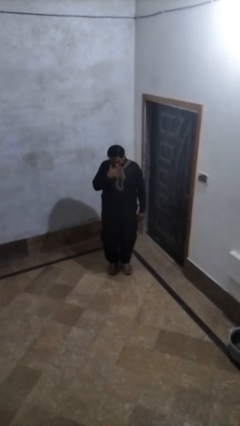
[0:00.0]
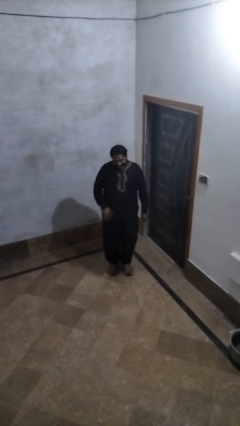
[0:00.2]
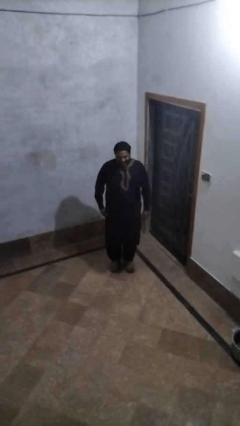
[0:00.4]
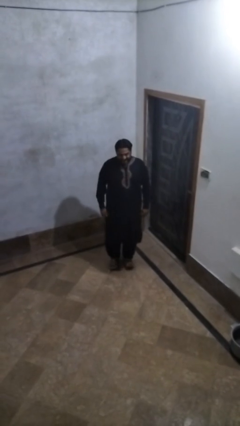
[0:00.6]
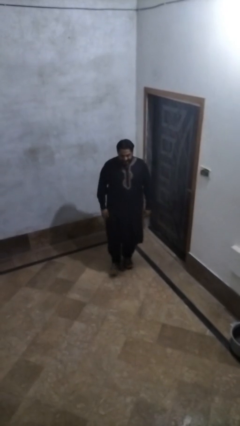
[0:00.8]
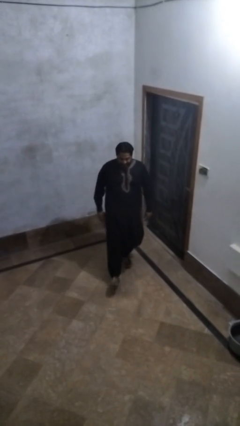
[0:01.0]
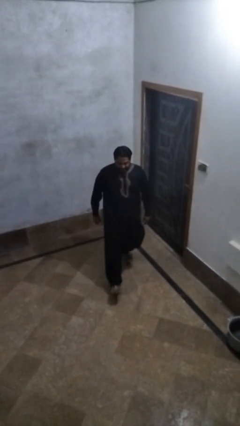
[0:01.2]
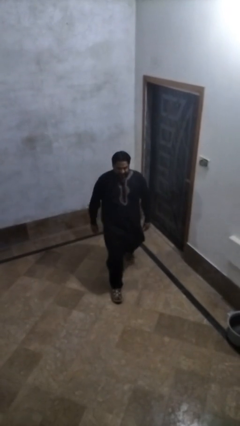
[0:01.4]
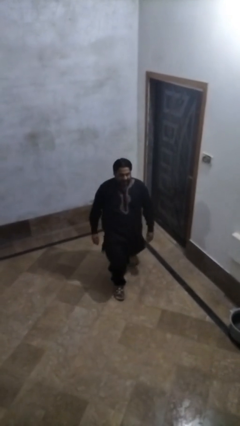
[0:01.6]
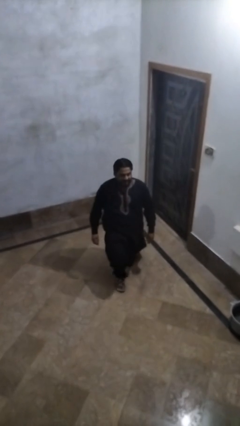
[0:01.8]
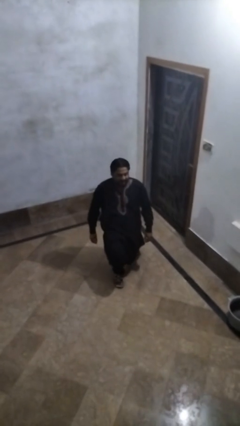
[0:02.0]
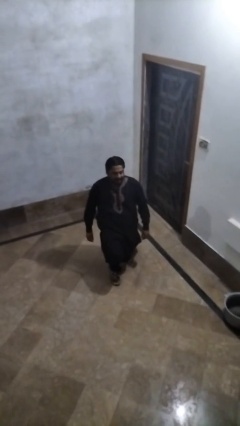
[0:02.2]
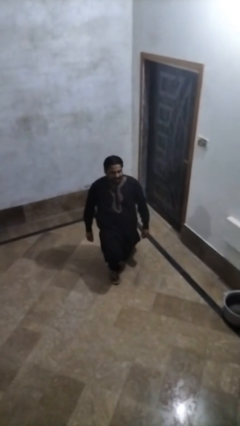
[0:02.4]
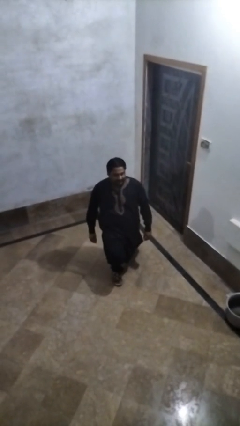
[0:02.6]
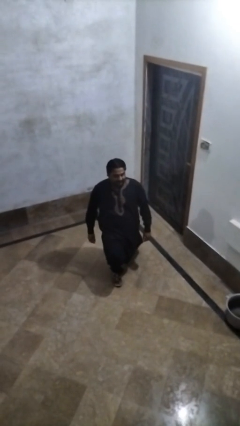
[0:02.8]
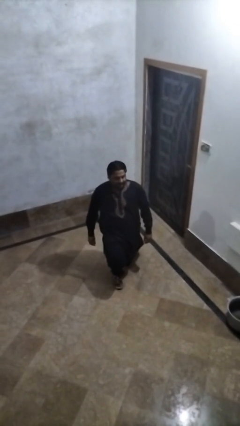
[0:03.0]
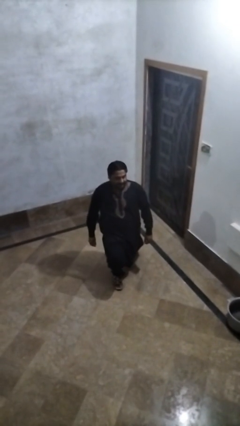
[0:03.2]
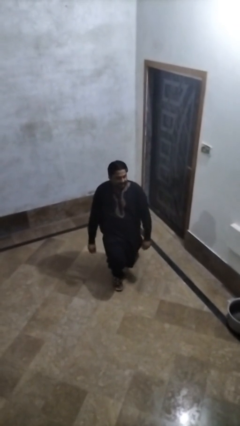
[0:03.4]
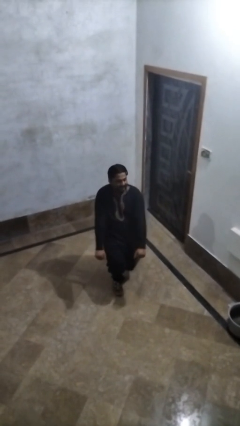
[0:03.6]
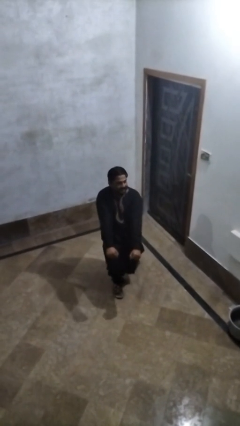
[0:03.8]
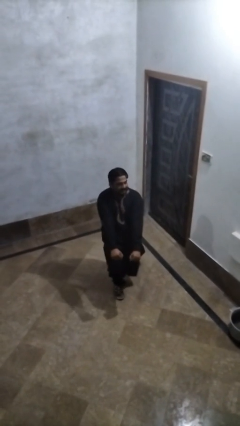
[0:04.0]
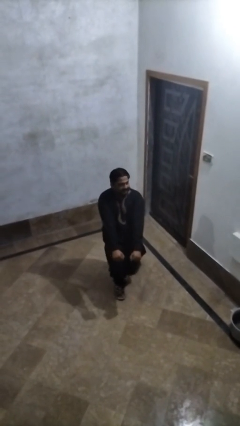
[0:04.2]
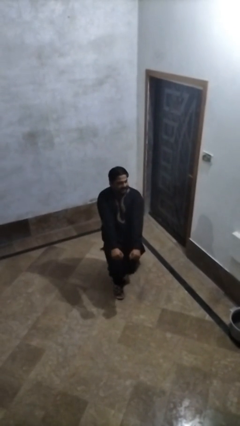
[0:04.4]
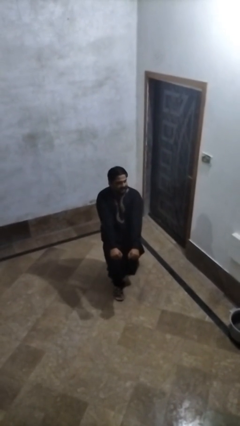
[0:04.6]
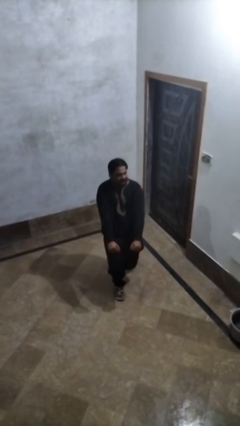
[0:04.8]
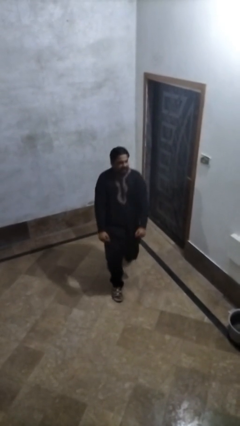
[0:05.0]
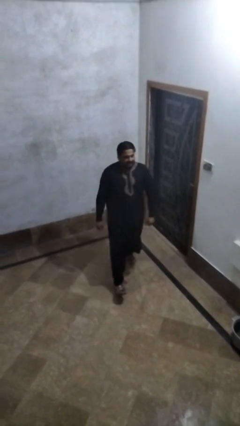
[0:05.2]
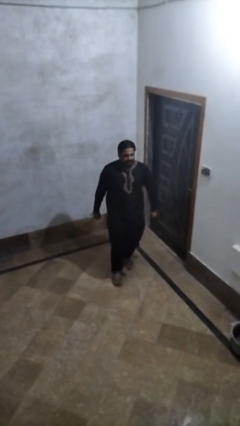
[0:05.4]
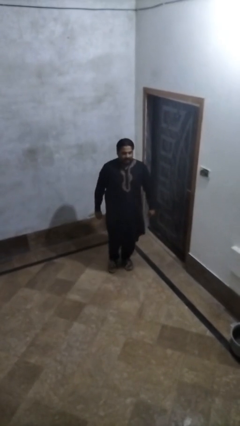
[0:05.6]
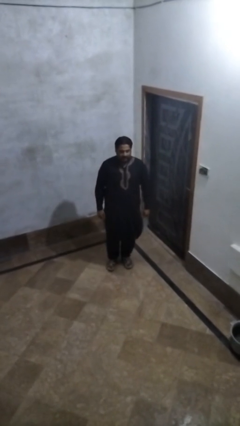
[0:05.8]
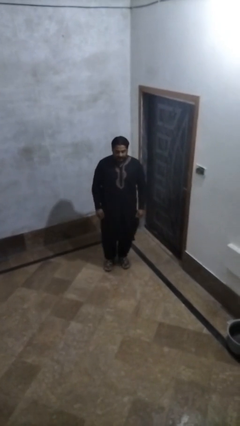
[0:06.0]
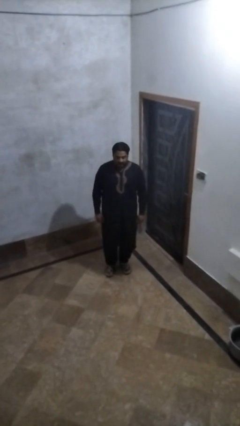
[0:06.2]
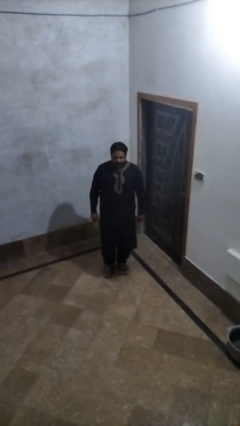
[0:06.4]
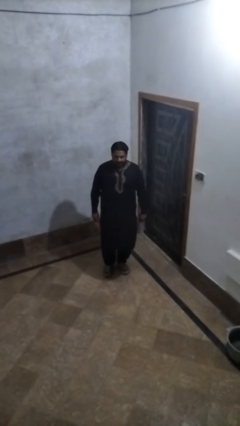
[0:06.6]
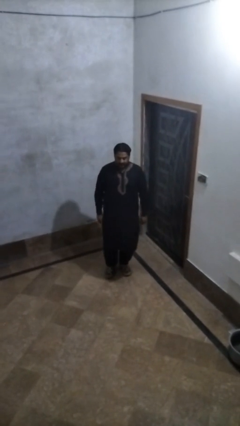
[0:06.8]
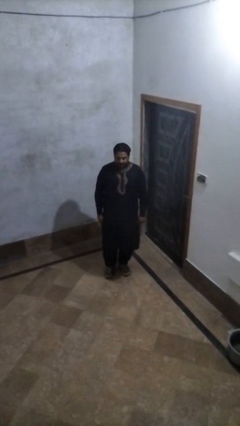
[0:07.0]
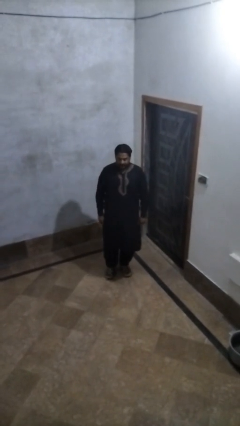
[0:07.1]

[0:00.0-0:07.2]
person exercises with lunges

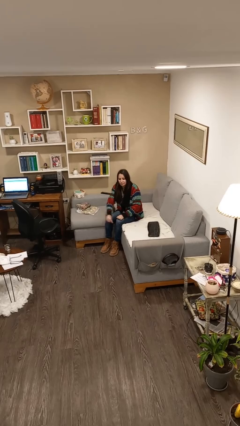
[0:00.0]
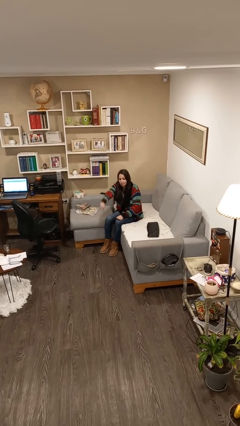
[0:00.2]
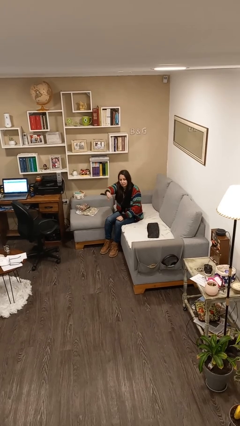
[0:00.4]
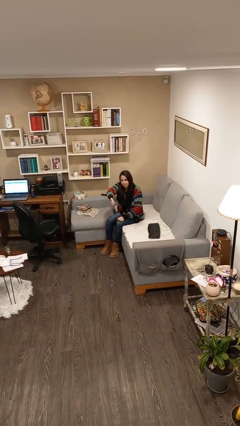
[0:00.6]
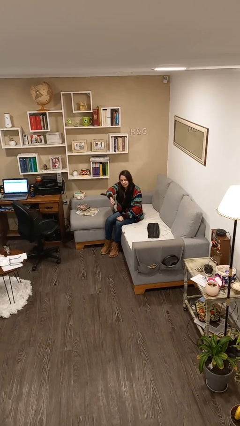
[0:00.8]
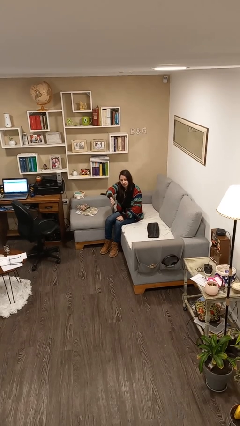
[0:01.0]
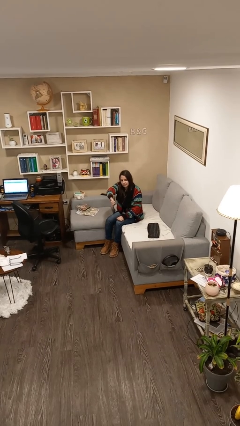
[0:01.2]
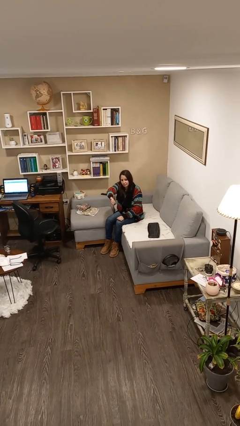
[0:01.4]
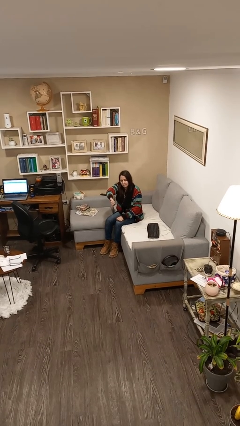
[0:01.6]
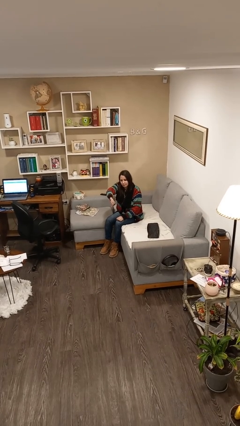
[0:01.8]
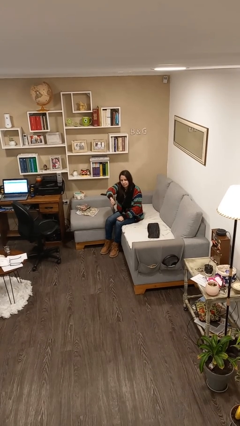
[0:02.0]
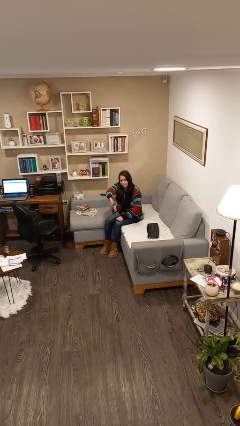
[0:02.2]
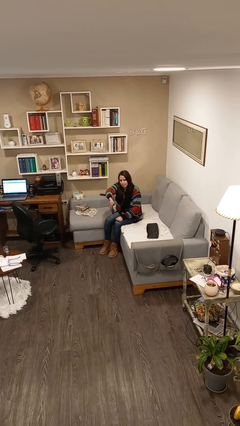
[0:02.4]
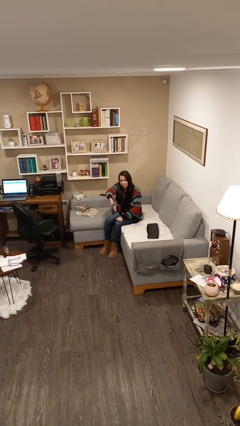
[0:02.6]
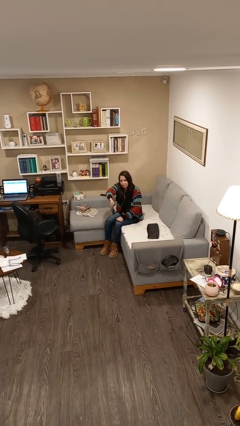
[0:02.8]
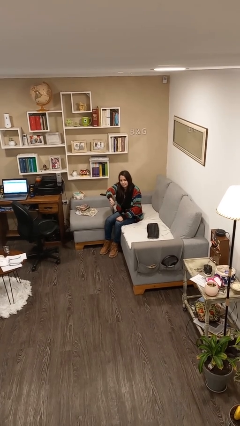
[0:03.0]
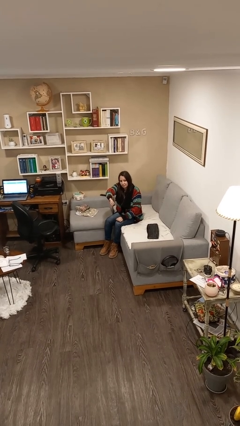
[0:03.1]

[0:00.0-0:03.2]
person gestures thumbs down

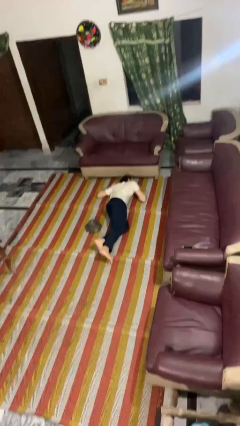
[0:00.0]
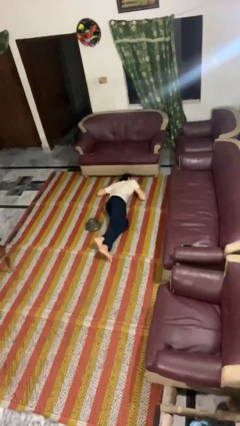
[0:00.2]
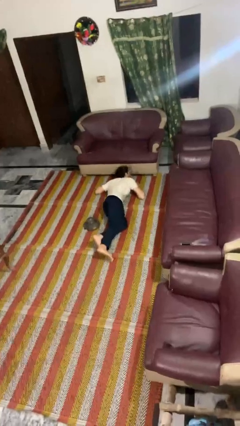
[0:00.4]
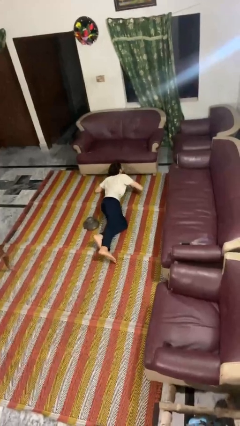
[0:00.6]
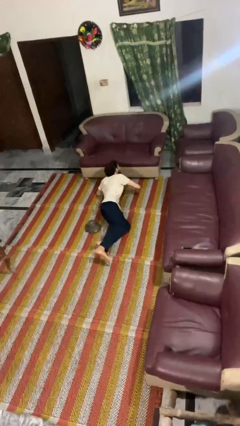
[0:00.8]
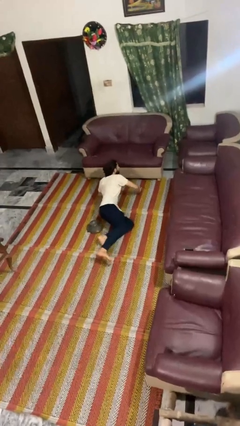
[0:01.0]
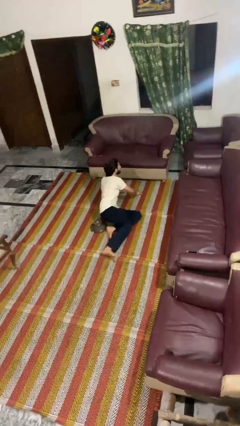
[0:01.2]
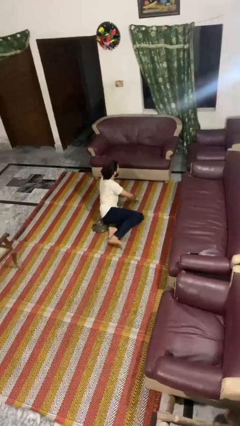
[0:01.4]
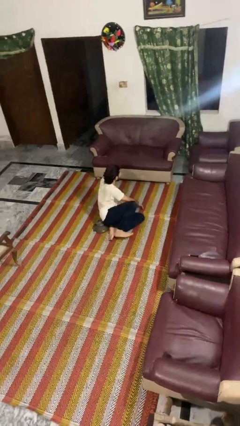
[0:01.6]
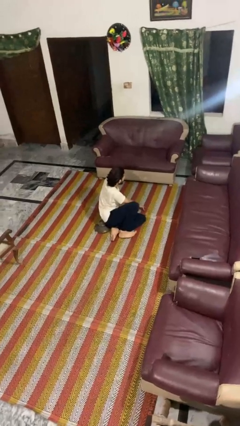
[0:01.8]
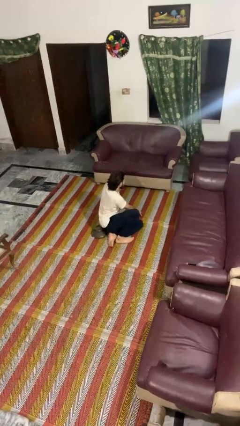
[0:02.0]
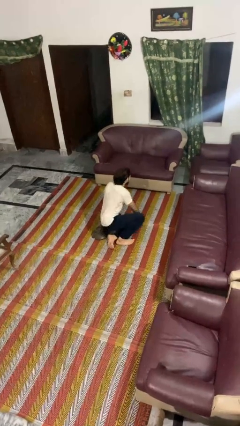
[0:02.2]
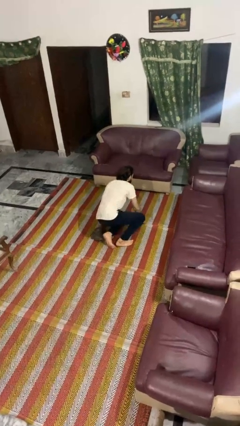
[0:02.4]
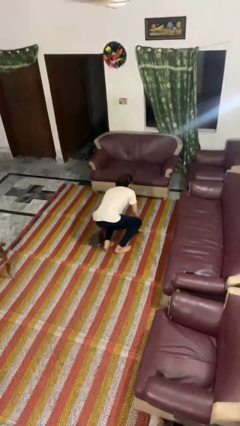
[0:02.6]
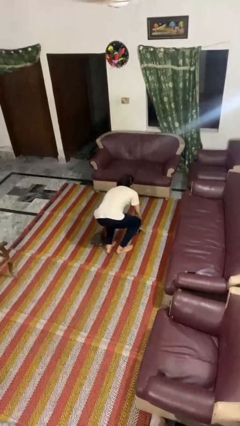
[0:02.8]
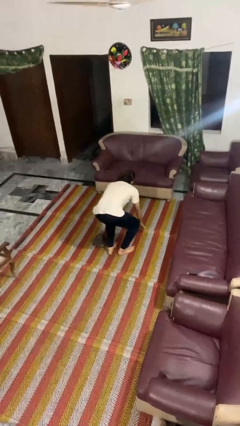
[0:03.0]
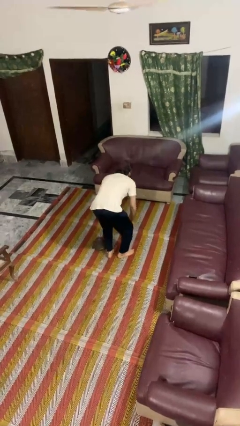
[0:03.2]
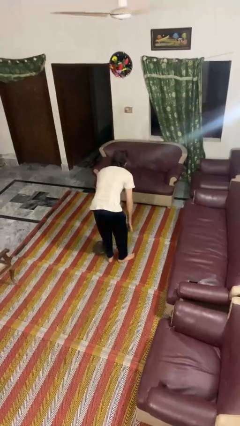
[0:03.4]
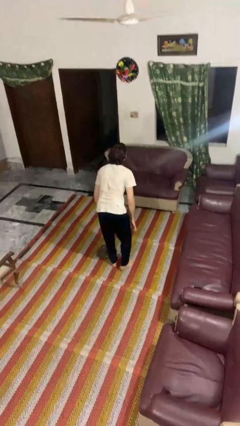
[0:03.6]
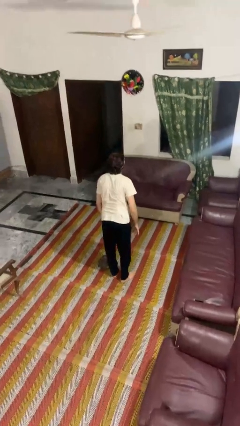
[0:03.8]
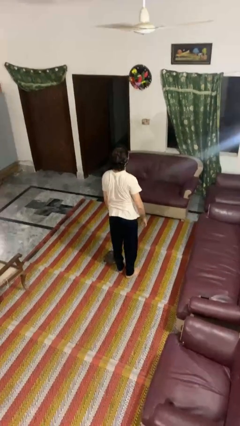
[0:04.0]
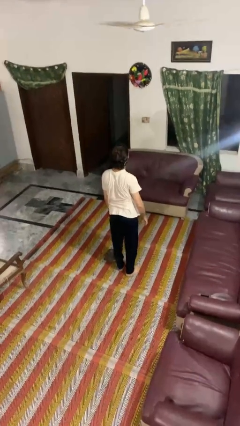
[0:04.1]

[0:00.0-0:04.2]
person stands up from floor

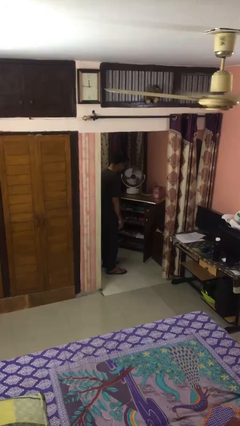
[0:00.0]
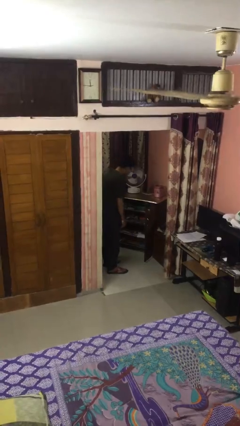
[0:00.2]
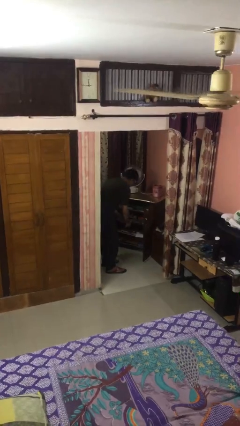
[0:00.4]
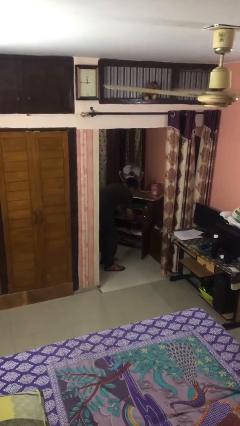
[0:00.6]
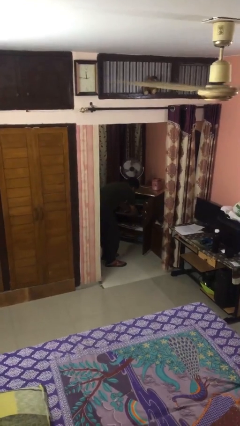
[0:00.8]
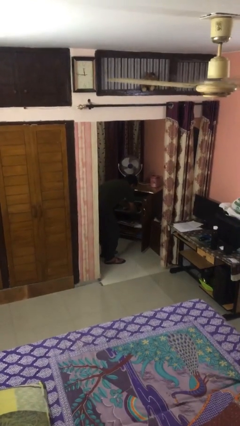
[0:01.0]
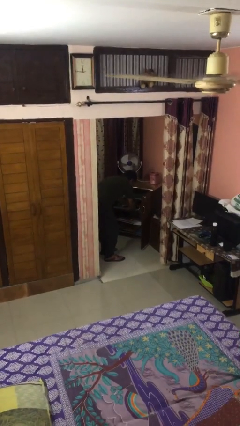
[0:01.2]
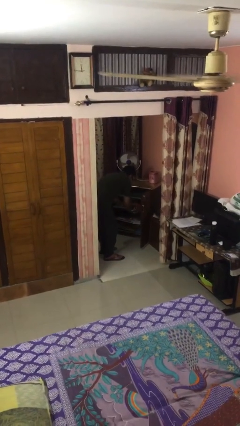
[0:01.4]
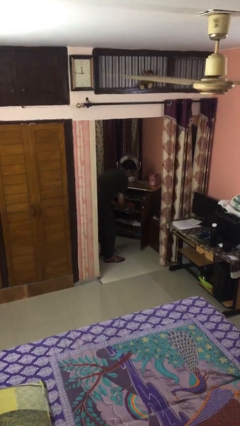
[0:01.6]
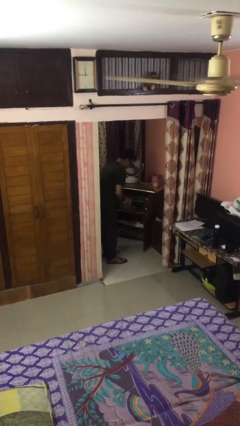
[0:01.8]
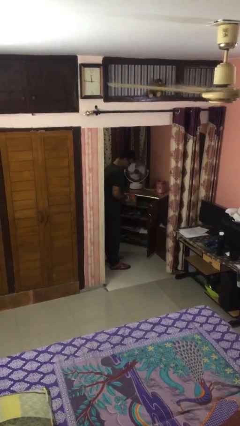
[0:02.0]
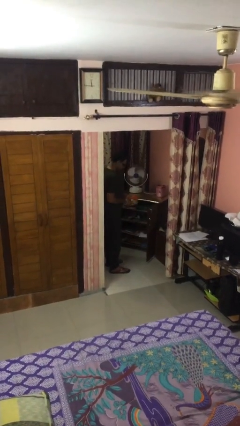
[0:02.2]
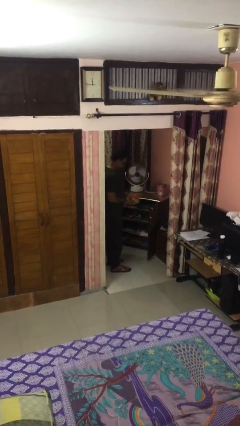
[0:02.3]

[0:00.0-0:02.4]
person picks up object from cabinet

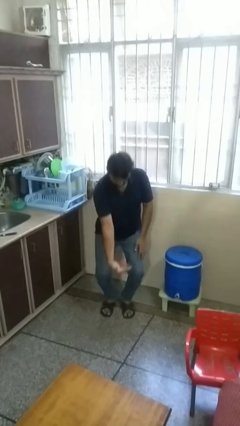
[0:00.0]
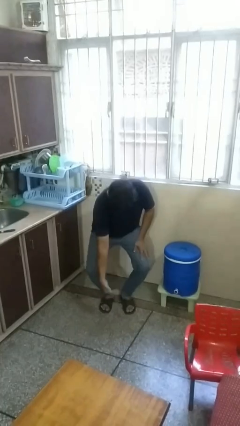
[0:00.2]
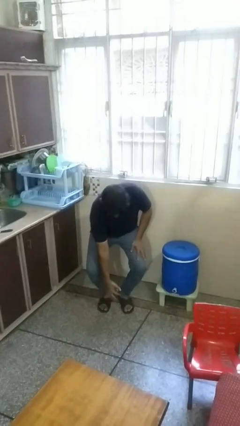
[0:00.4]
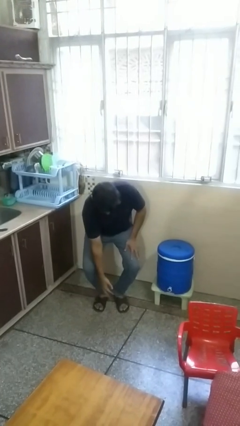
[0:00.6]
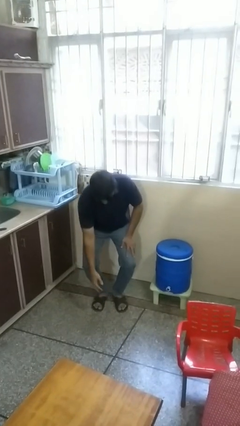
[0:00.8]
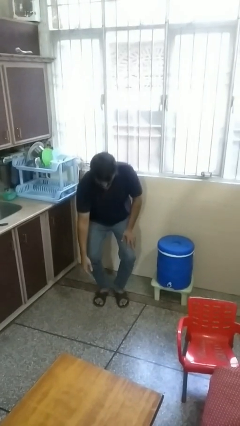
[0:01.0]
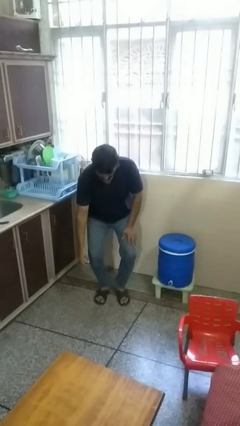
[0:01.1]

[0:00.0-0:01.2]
person catches dropped object
